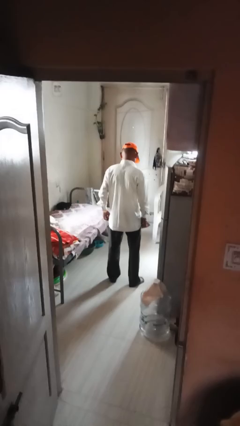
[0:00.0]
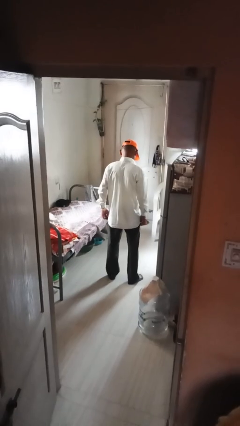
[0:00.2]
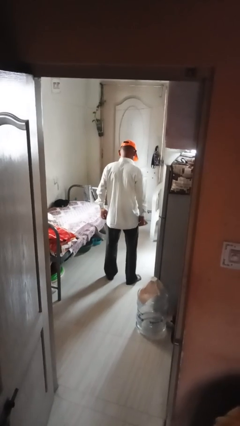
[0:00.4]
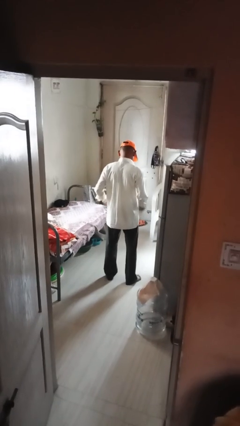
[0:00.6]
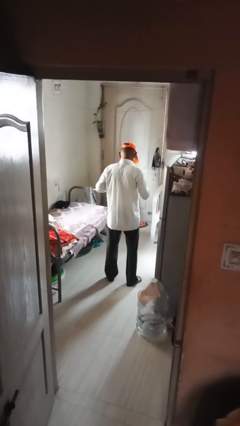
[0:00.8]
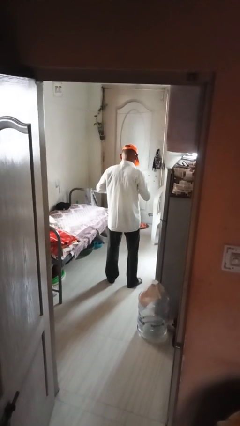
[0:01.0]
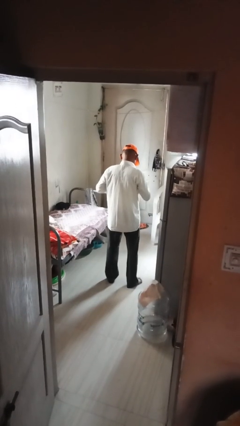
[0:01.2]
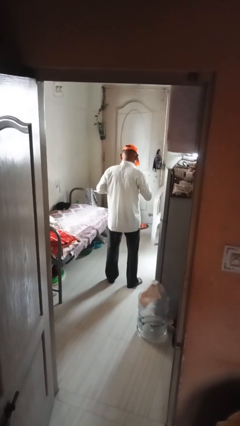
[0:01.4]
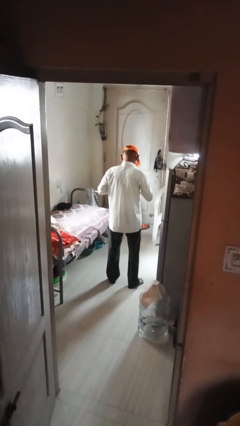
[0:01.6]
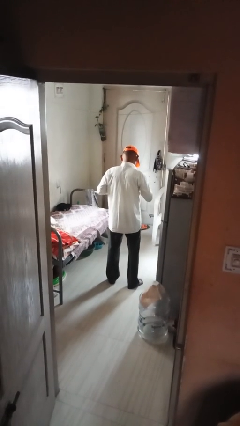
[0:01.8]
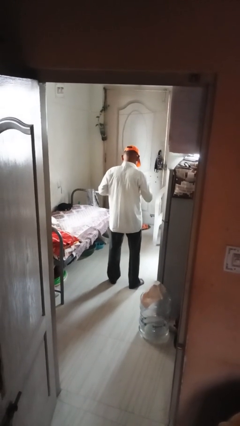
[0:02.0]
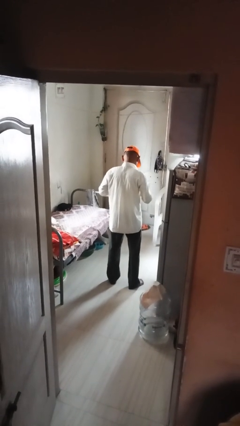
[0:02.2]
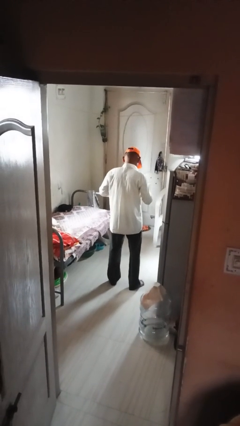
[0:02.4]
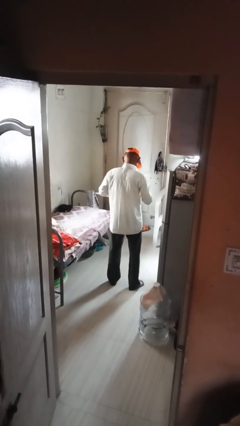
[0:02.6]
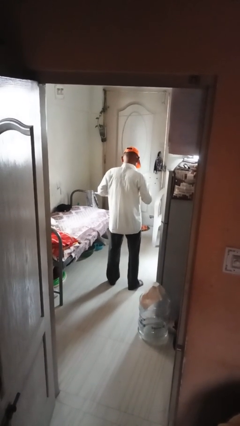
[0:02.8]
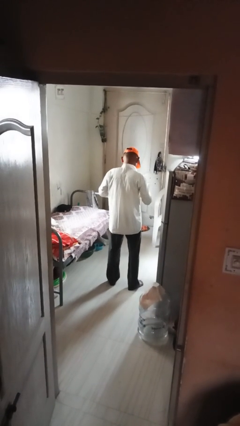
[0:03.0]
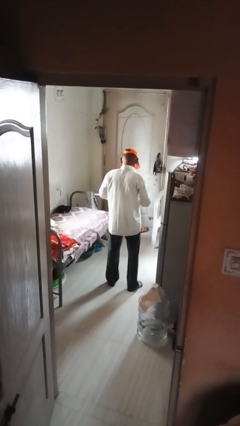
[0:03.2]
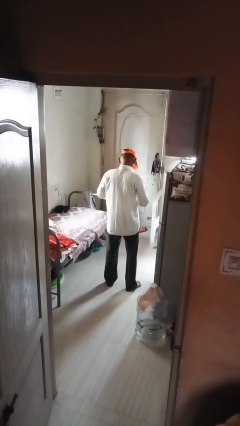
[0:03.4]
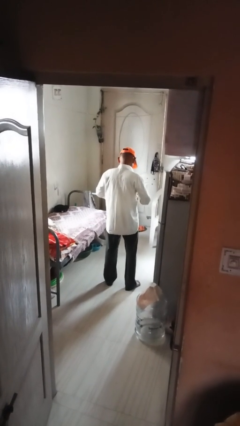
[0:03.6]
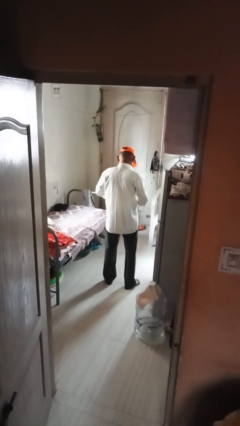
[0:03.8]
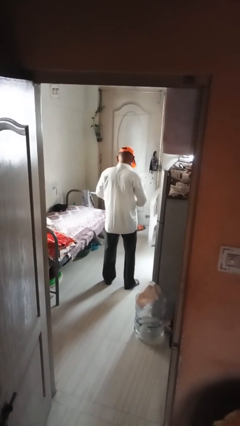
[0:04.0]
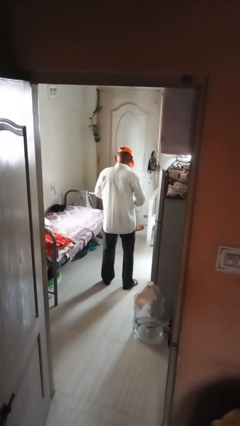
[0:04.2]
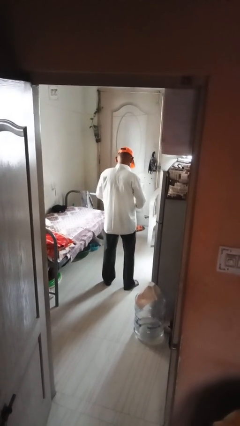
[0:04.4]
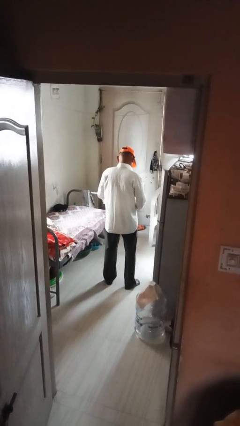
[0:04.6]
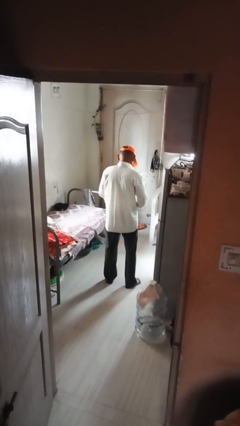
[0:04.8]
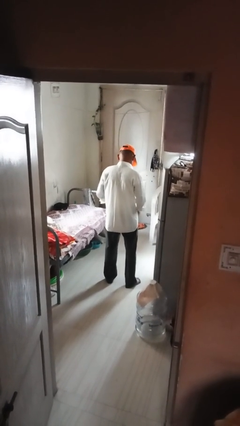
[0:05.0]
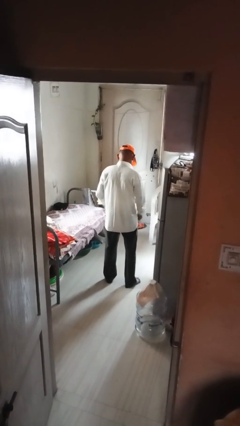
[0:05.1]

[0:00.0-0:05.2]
person buttons shirt

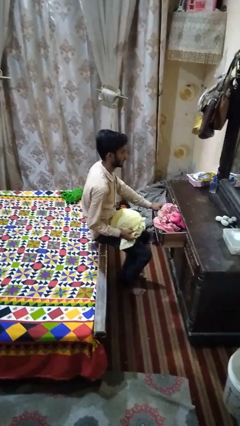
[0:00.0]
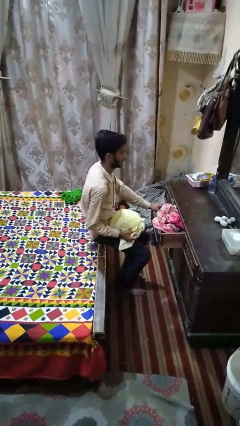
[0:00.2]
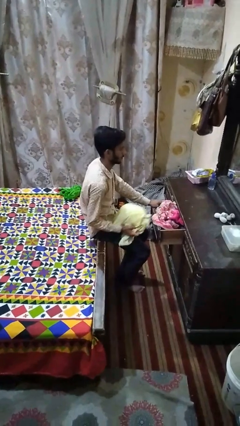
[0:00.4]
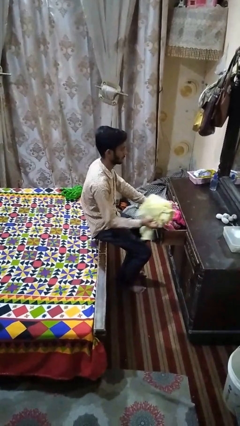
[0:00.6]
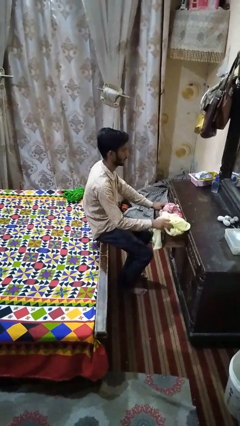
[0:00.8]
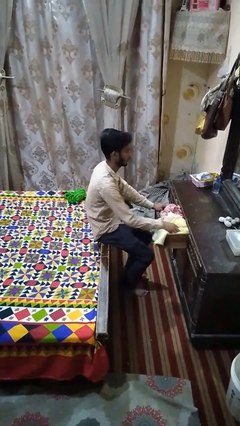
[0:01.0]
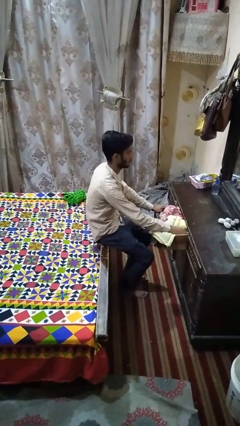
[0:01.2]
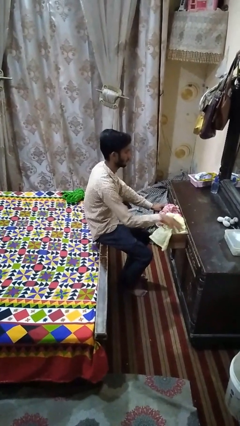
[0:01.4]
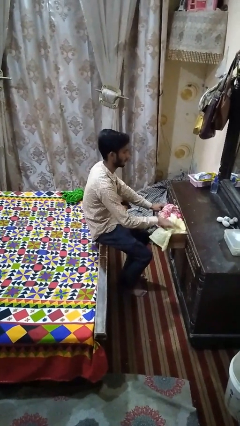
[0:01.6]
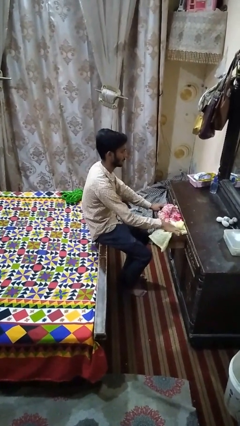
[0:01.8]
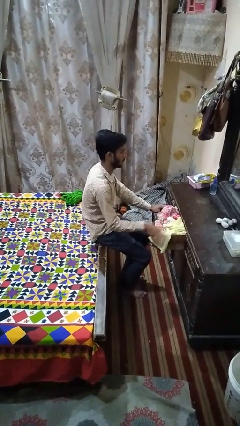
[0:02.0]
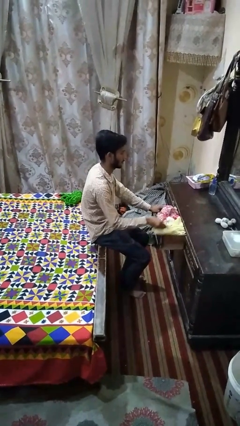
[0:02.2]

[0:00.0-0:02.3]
person puts clothes into dresser

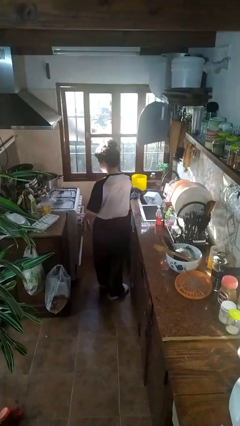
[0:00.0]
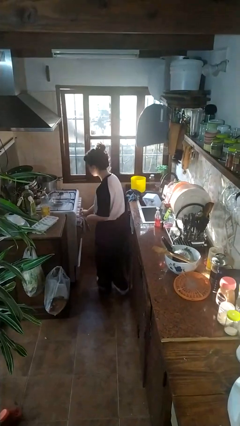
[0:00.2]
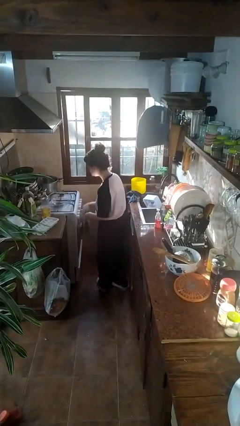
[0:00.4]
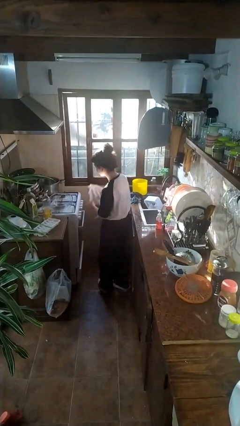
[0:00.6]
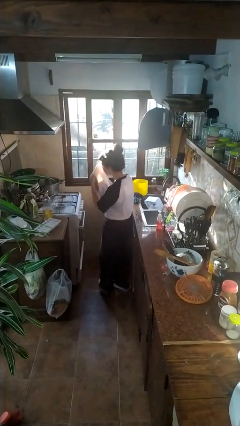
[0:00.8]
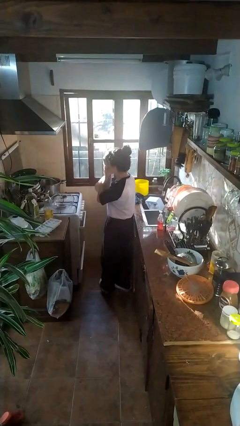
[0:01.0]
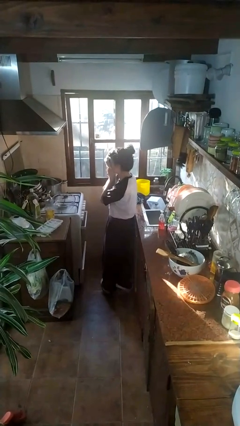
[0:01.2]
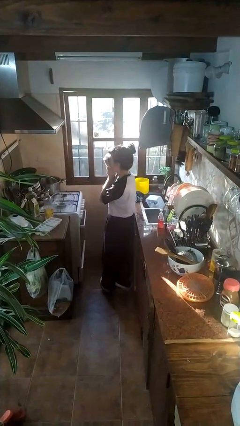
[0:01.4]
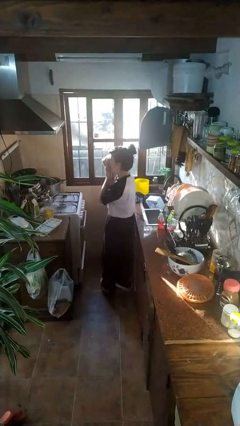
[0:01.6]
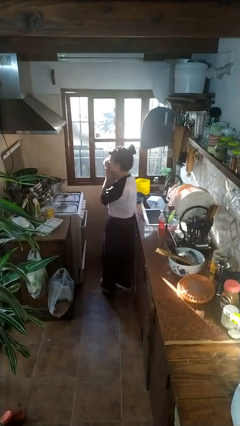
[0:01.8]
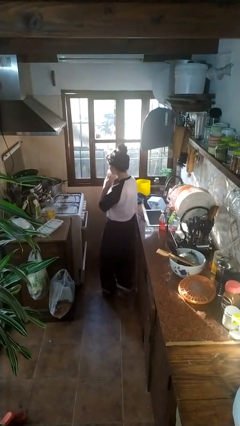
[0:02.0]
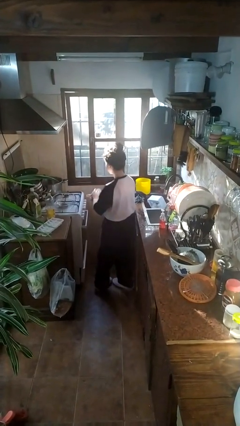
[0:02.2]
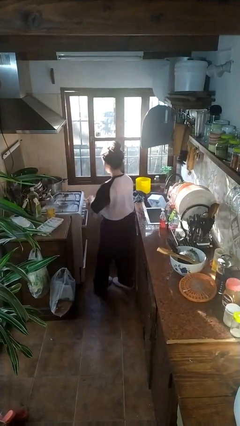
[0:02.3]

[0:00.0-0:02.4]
person dries face with towel

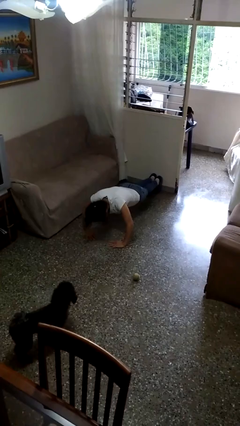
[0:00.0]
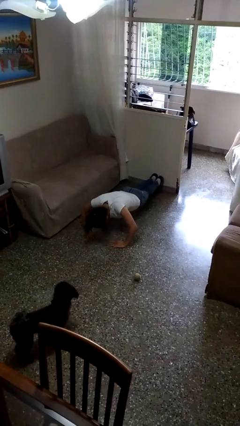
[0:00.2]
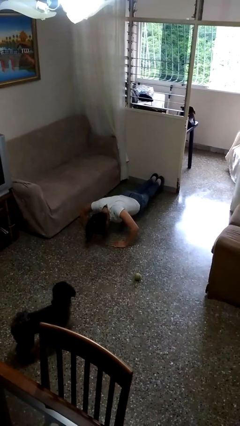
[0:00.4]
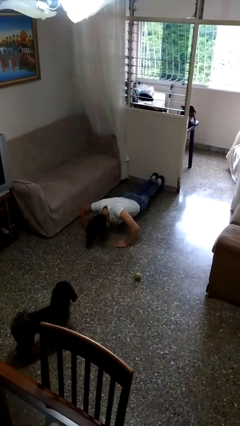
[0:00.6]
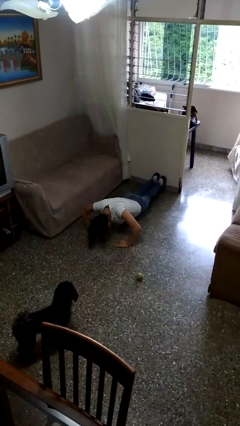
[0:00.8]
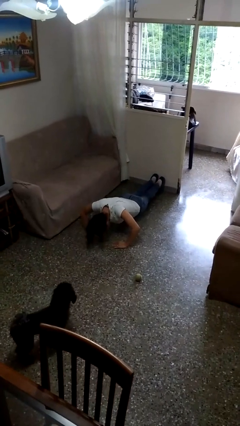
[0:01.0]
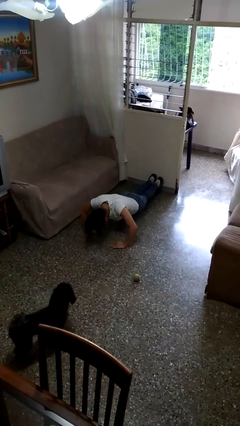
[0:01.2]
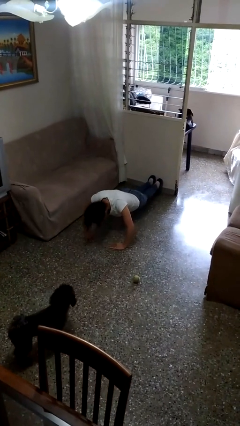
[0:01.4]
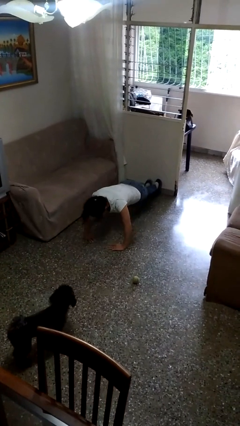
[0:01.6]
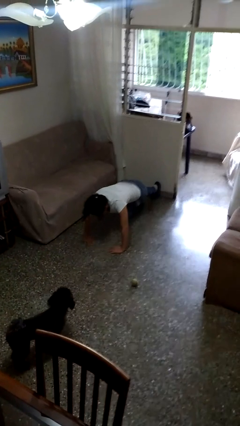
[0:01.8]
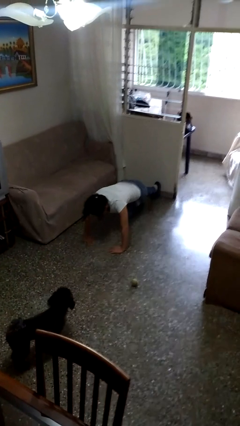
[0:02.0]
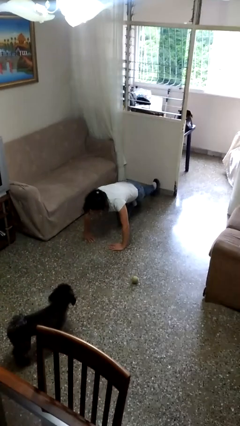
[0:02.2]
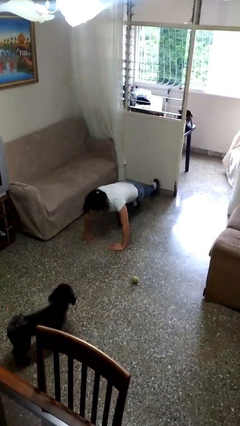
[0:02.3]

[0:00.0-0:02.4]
person exercises with pushup

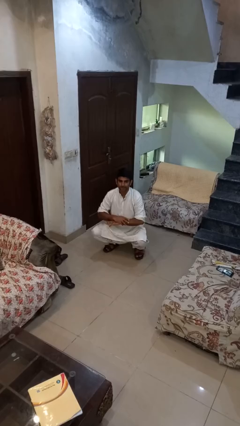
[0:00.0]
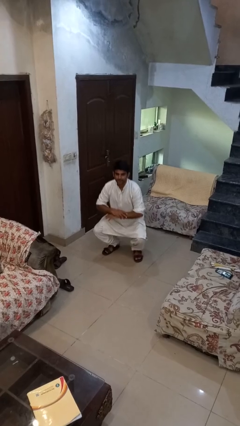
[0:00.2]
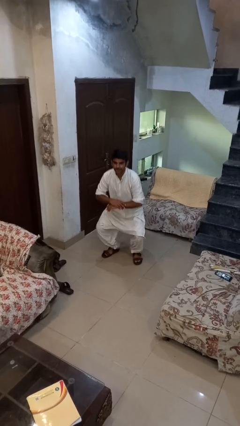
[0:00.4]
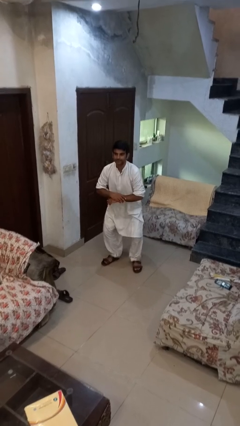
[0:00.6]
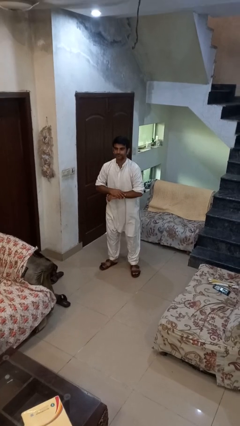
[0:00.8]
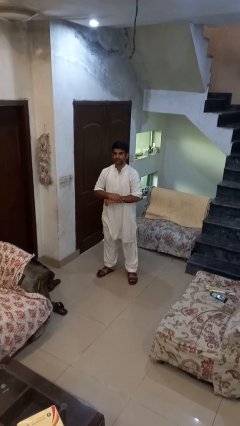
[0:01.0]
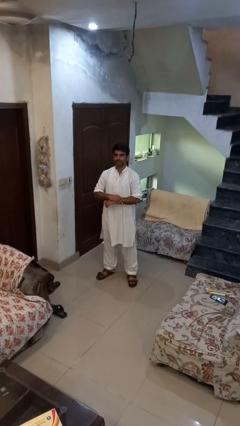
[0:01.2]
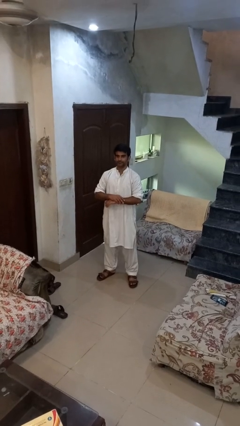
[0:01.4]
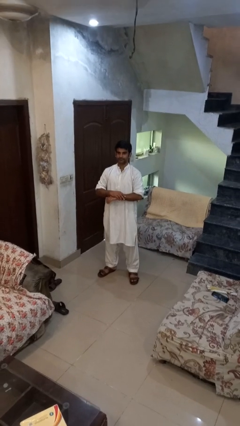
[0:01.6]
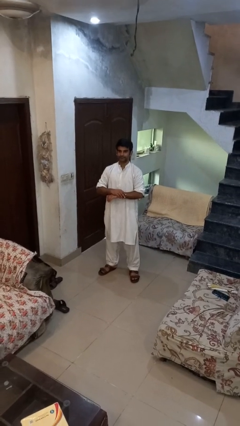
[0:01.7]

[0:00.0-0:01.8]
person stands up

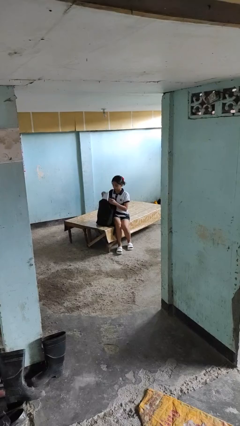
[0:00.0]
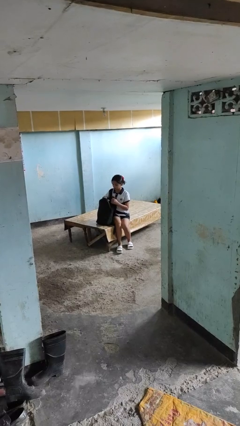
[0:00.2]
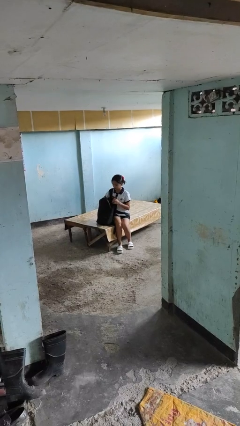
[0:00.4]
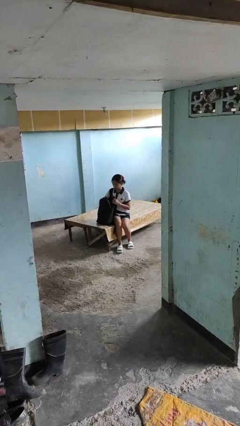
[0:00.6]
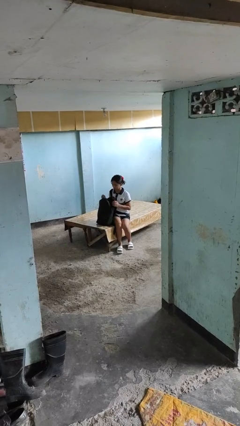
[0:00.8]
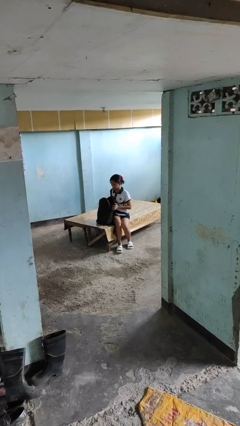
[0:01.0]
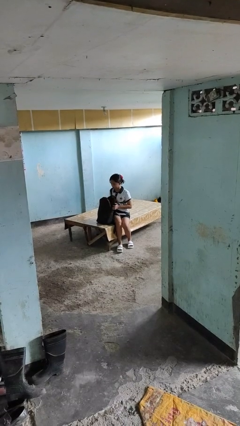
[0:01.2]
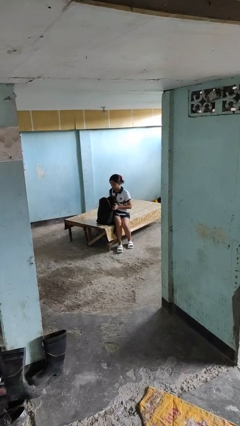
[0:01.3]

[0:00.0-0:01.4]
person puts object into backpack

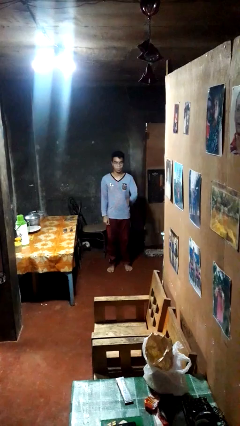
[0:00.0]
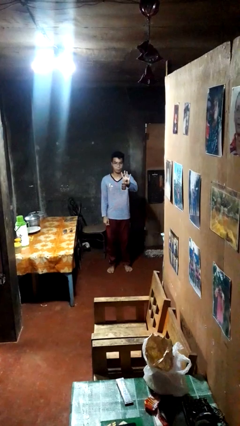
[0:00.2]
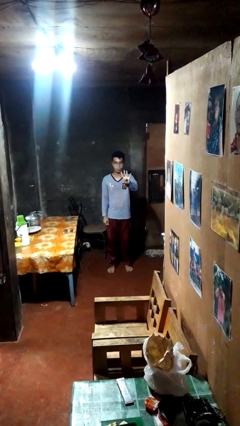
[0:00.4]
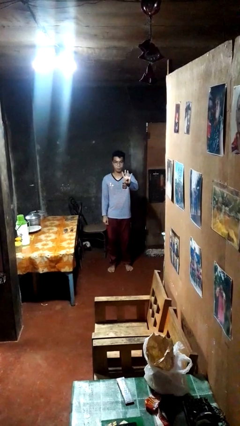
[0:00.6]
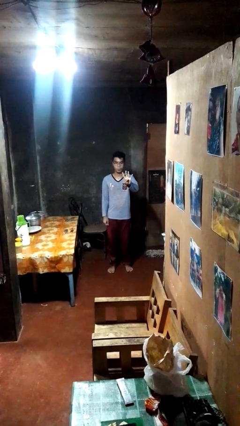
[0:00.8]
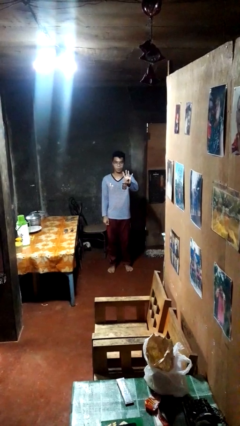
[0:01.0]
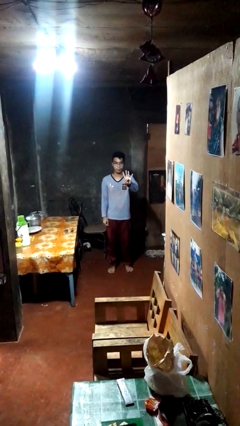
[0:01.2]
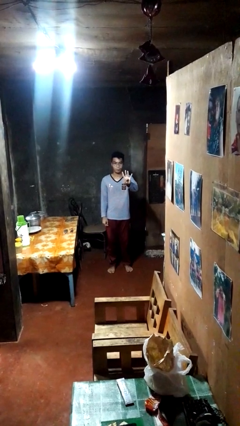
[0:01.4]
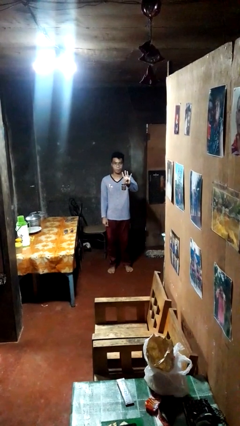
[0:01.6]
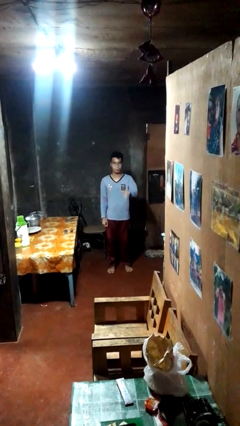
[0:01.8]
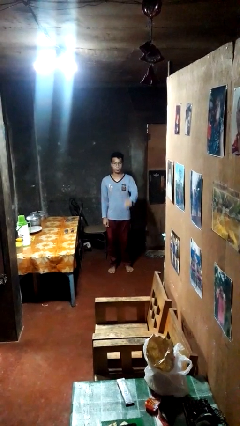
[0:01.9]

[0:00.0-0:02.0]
person gestures number four
